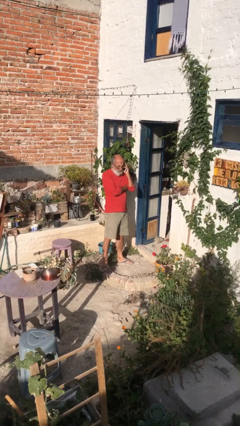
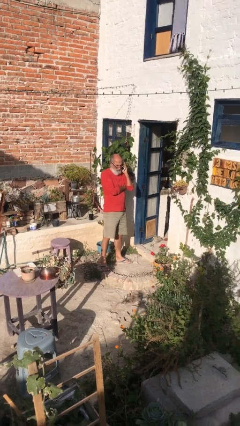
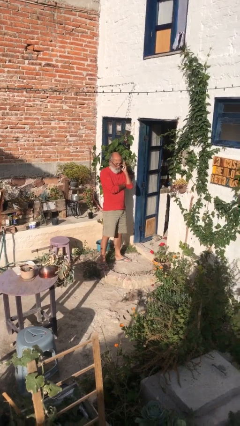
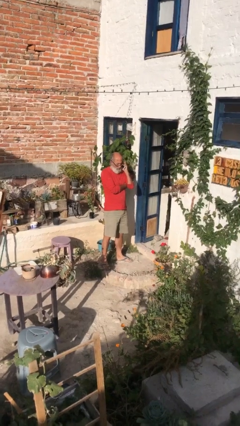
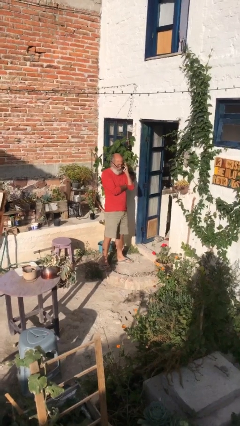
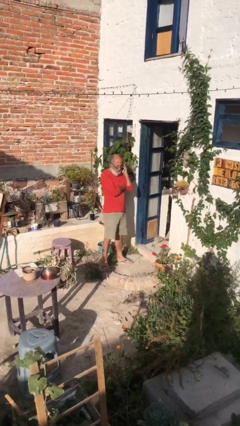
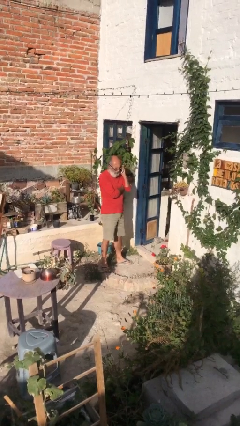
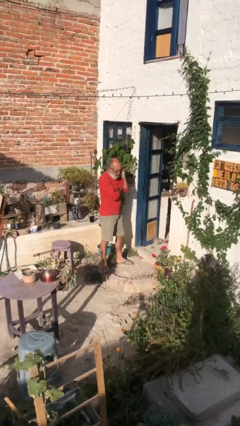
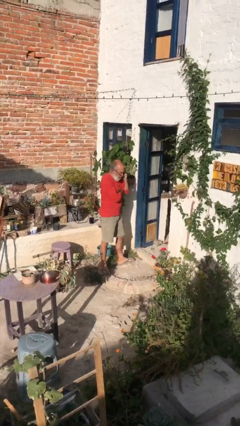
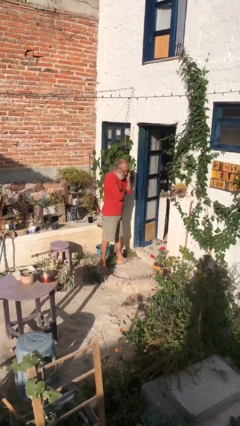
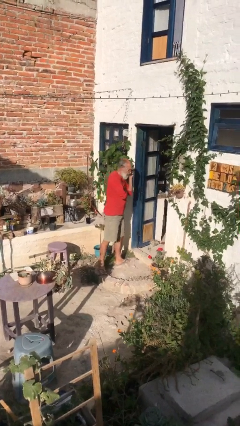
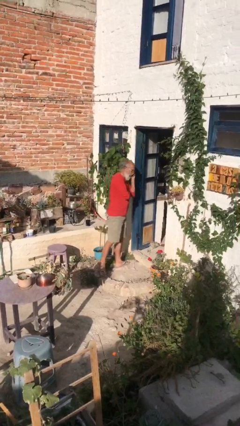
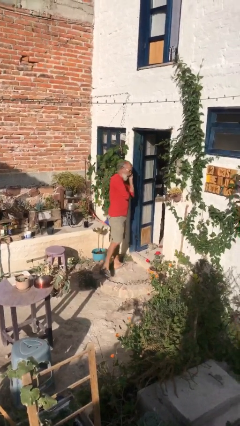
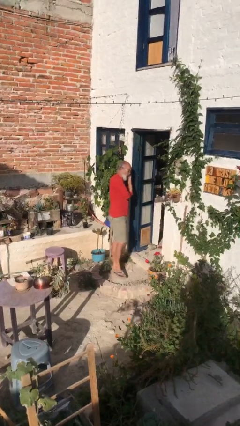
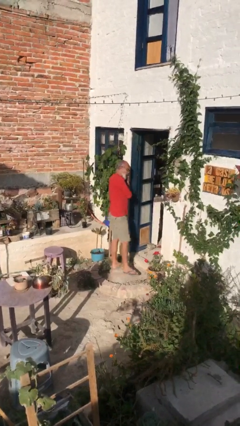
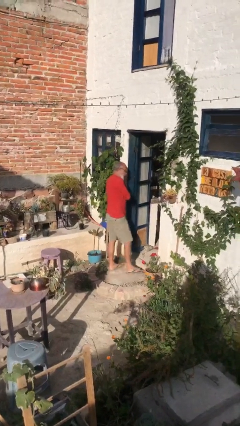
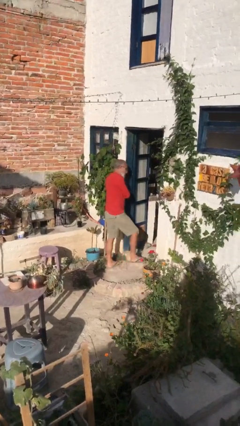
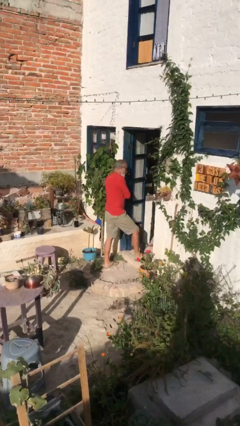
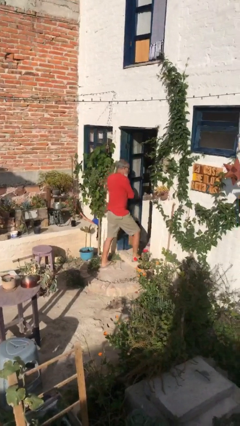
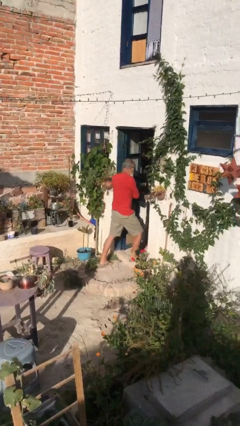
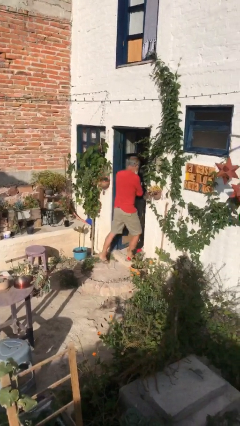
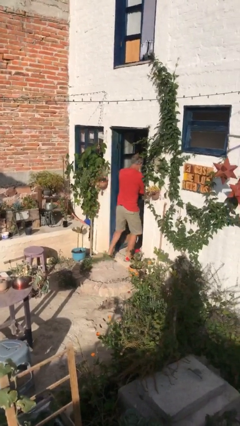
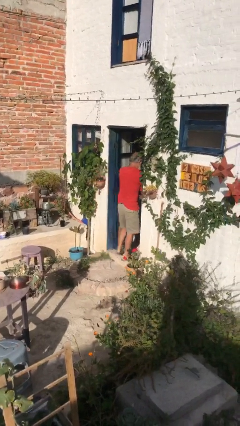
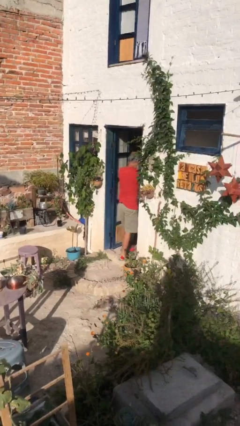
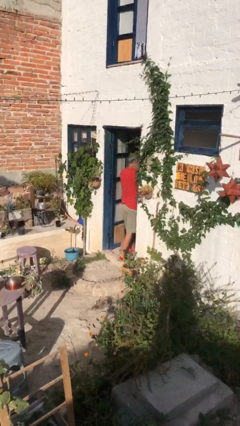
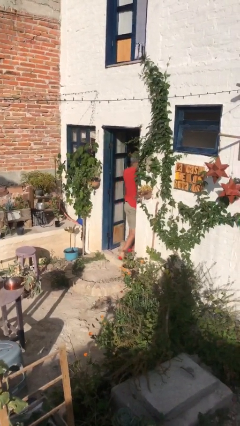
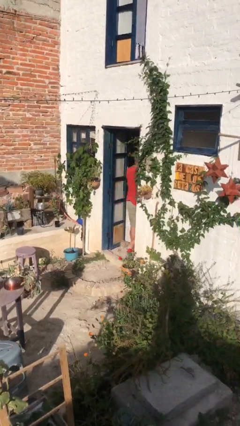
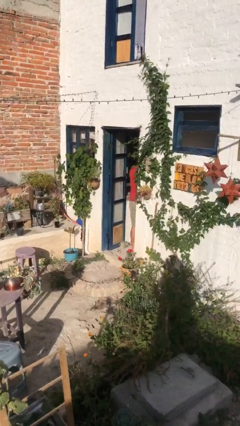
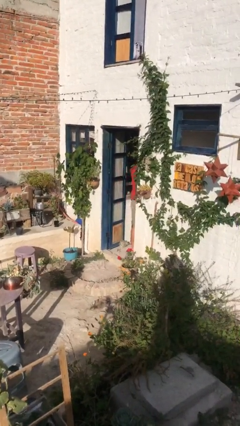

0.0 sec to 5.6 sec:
person exits scene through structure

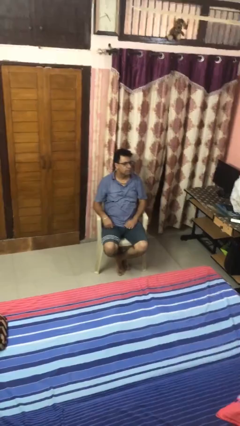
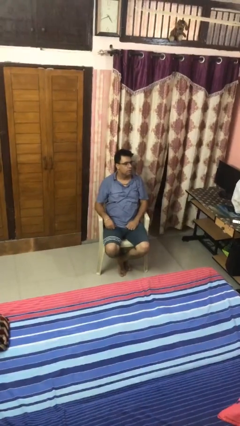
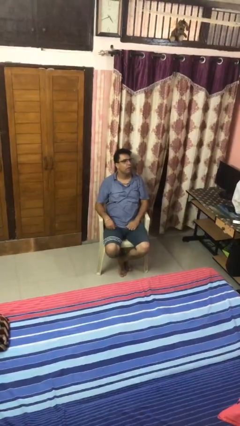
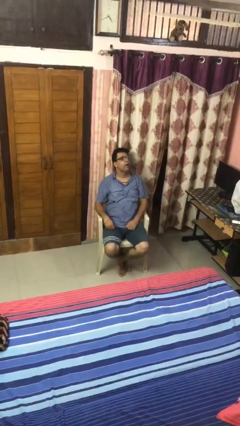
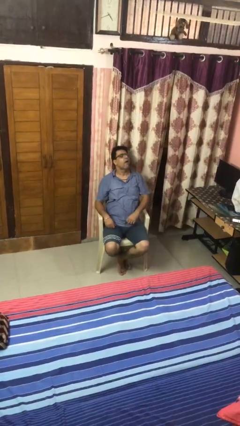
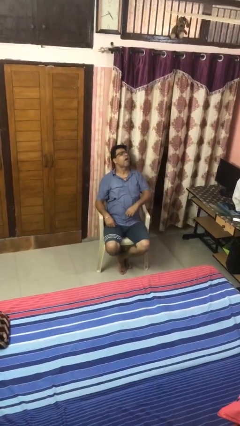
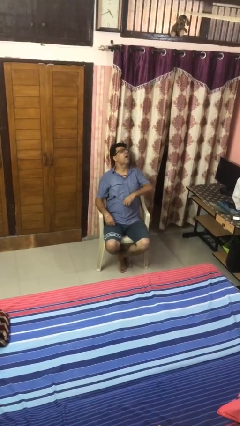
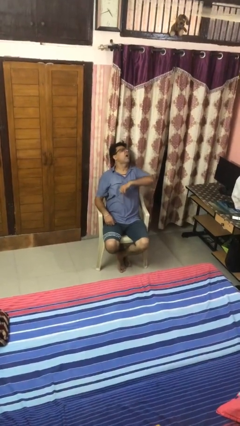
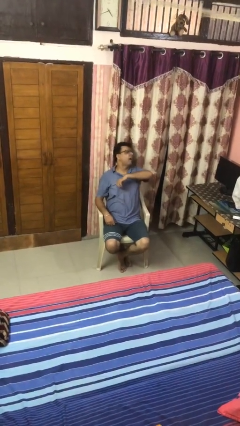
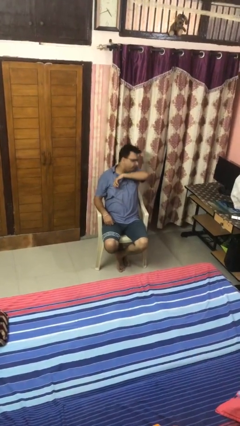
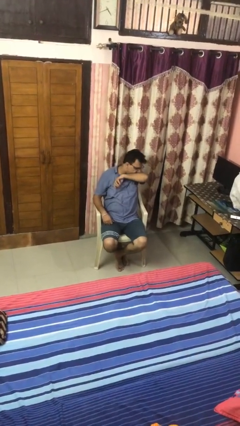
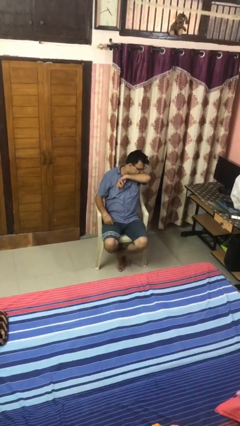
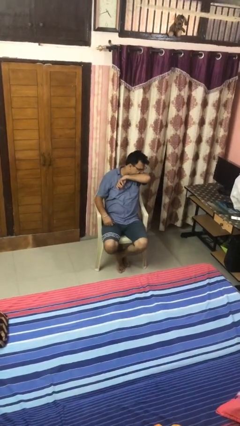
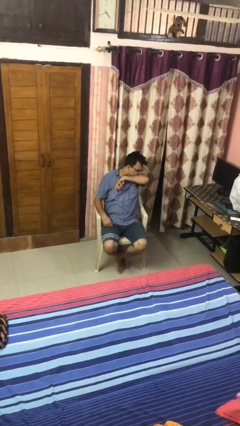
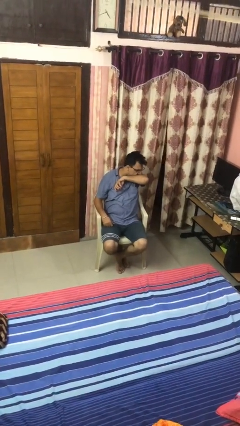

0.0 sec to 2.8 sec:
person sneezes into arm

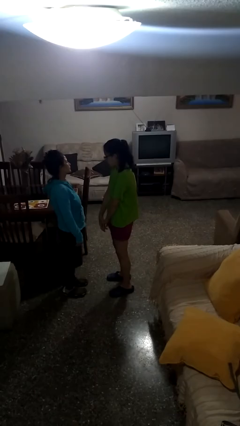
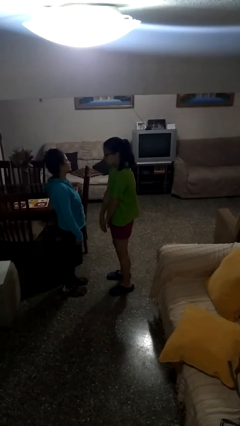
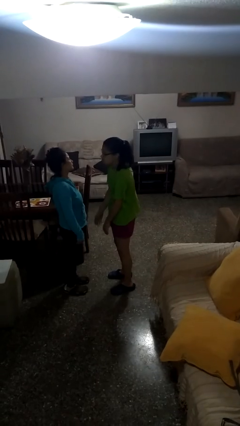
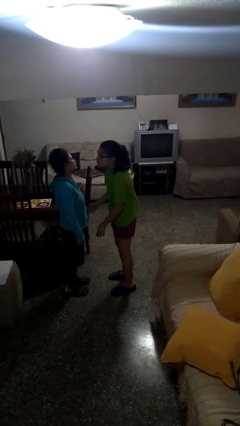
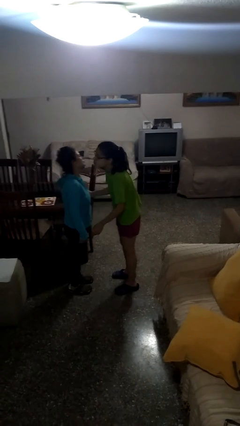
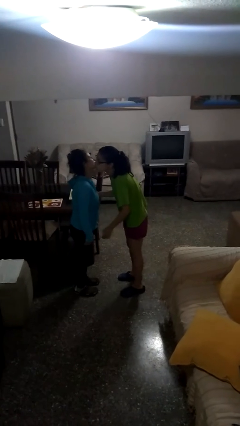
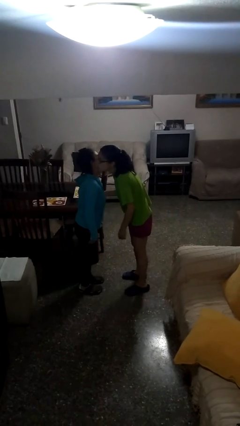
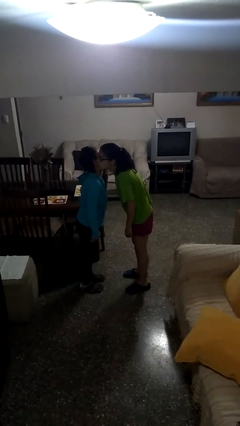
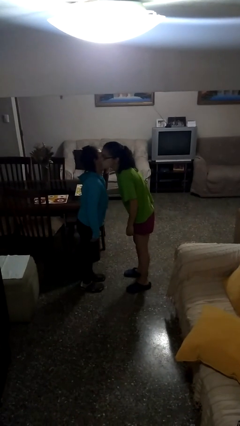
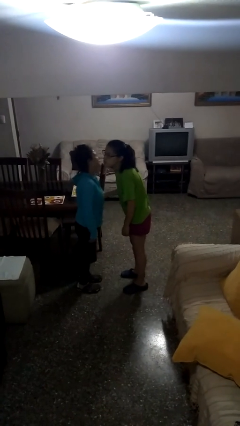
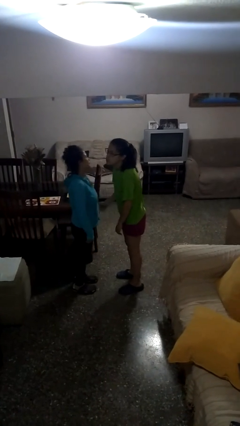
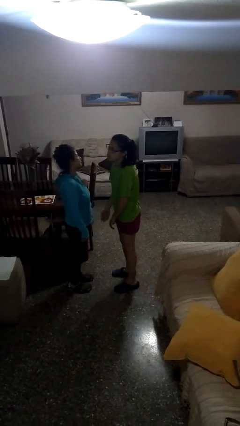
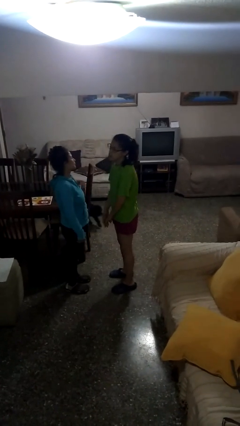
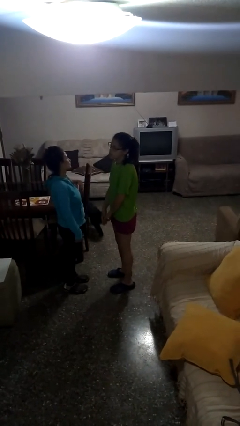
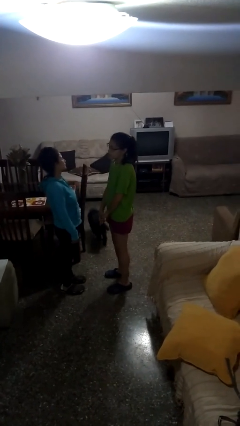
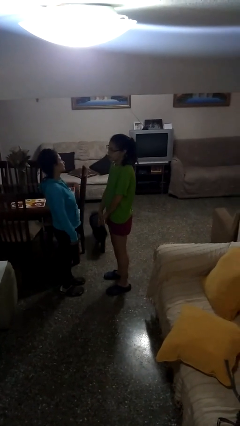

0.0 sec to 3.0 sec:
person kisses cheek of person

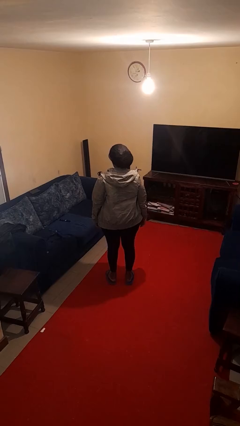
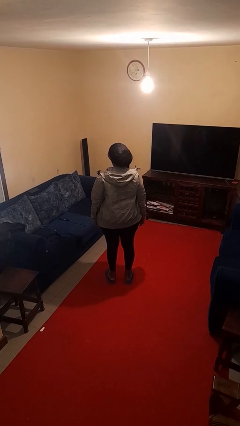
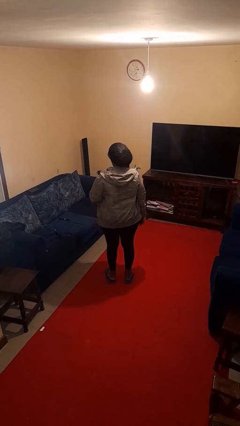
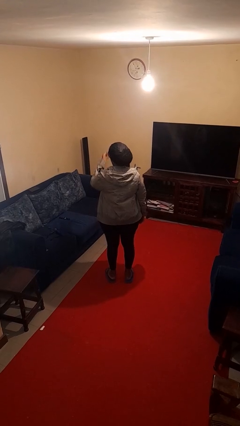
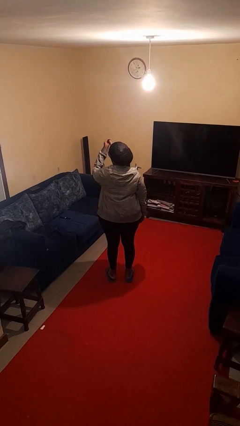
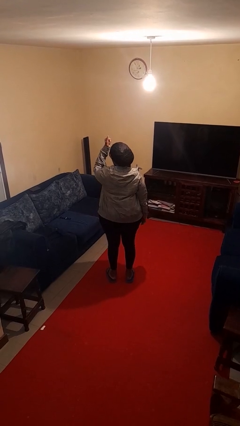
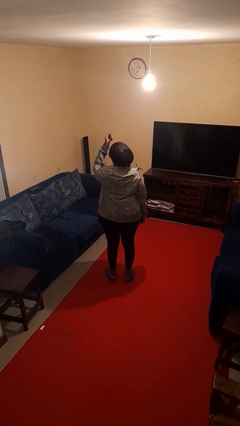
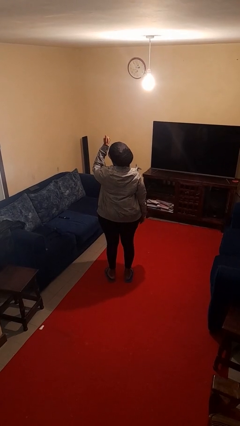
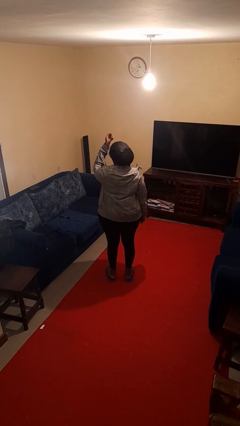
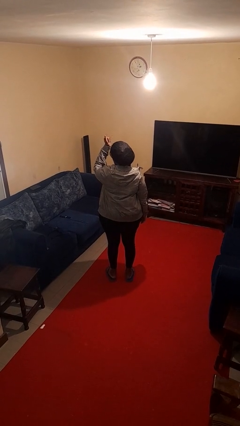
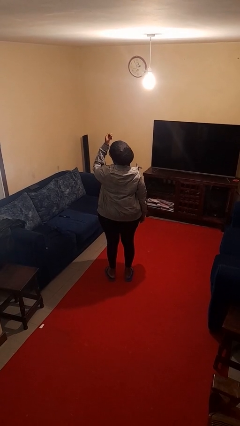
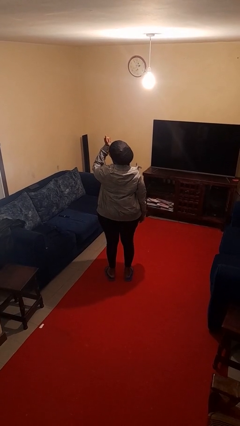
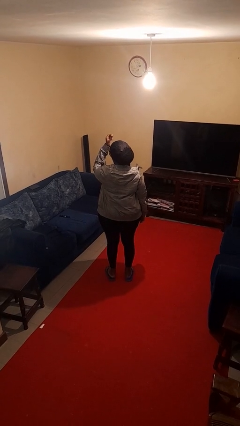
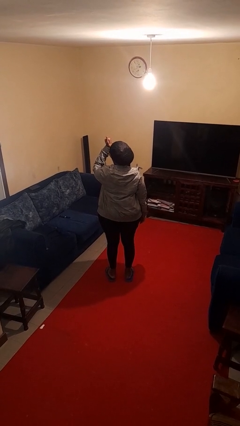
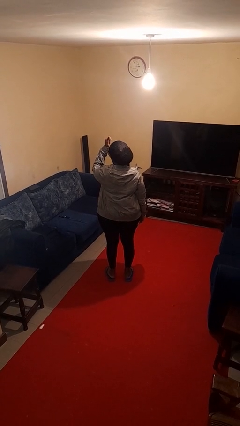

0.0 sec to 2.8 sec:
person snaps fingers

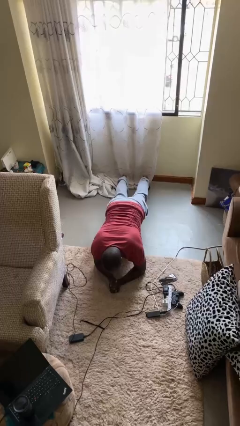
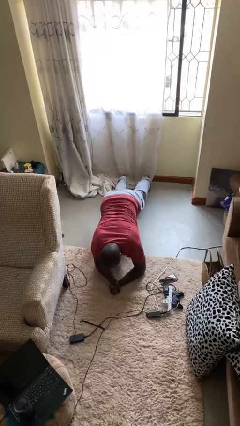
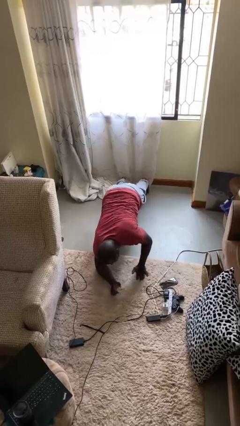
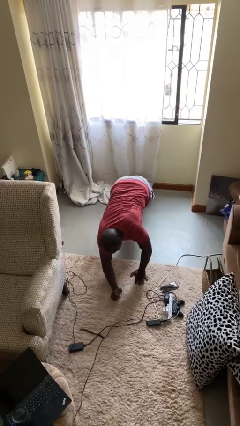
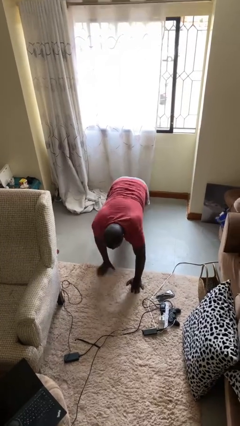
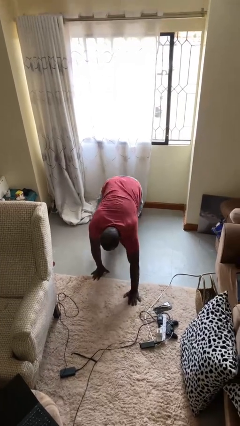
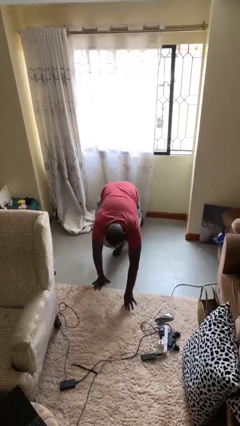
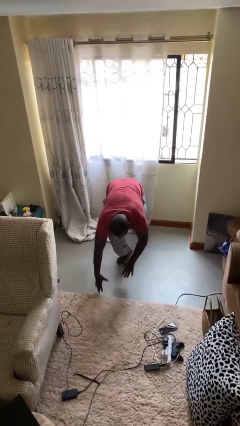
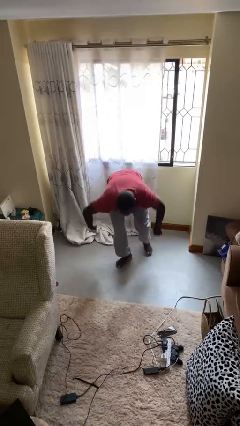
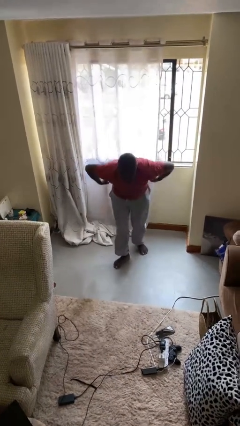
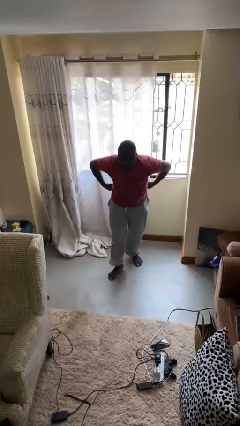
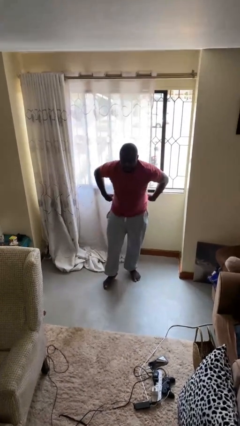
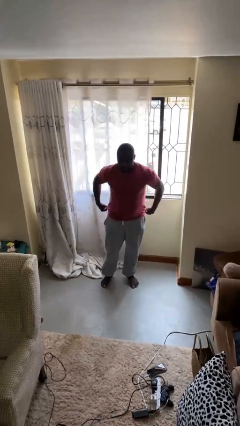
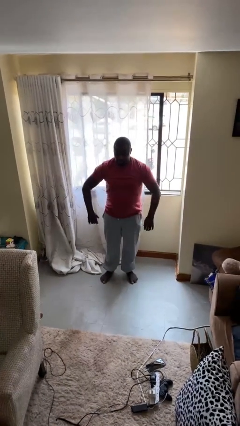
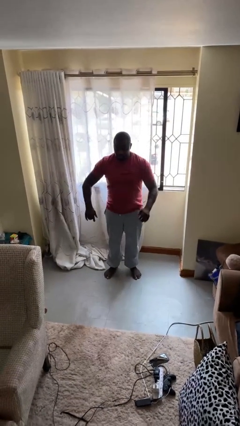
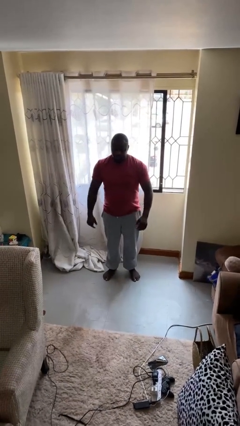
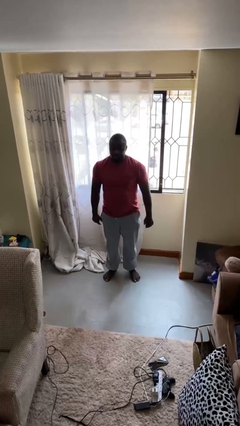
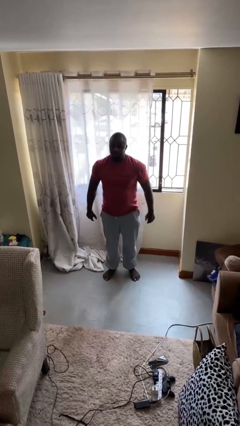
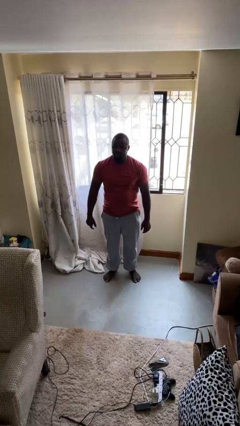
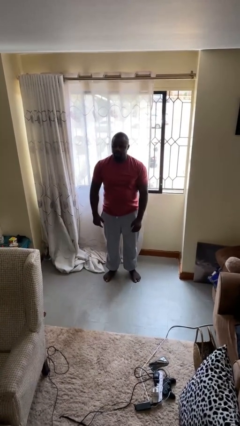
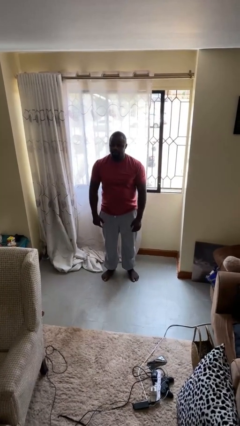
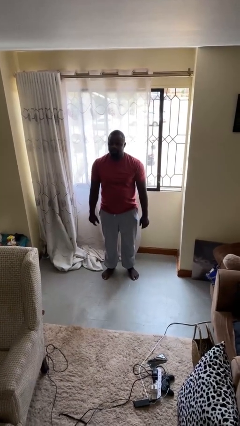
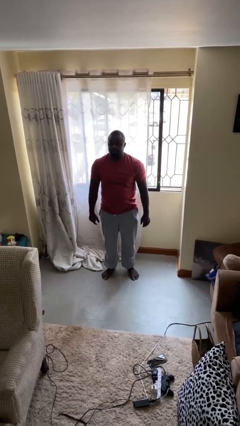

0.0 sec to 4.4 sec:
person stands up from floor
